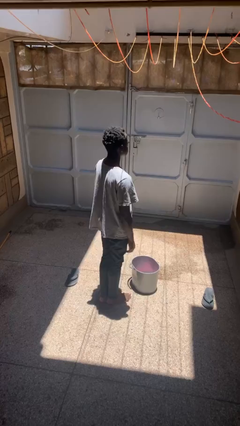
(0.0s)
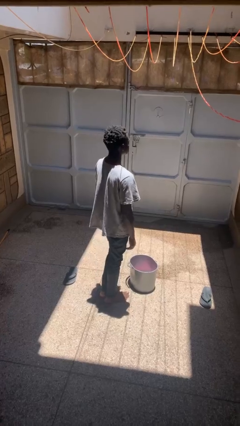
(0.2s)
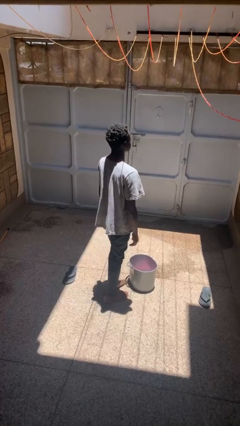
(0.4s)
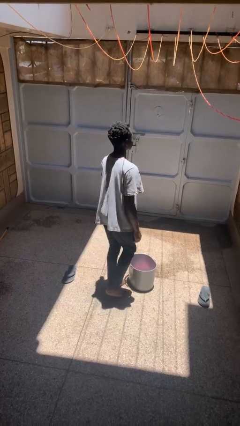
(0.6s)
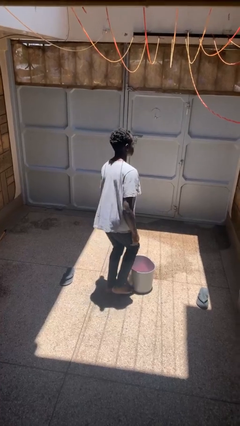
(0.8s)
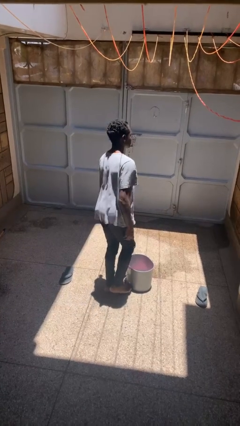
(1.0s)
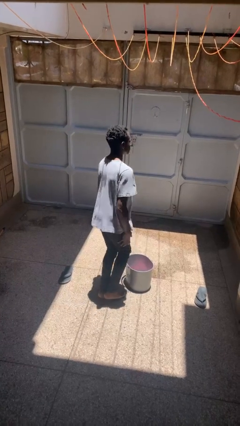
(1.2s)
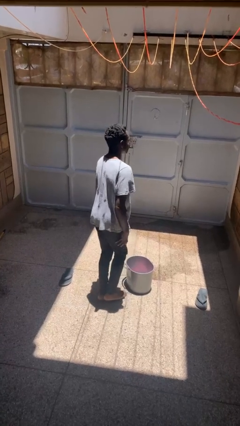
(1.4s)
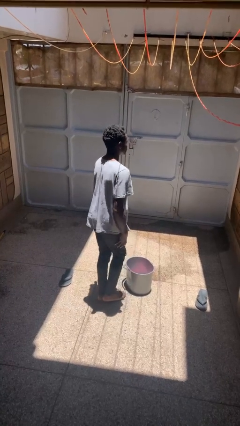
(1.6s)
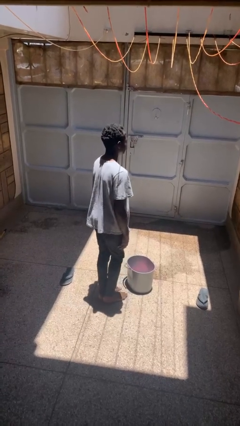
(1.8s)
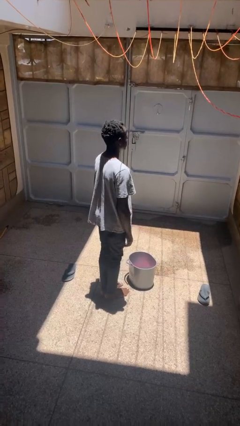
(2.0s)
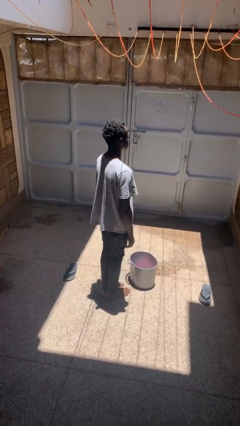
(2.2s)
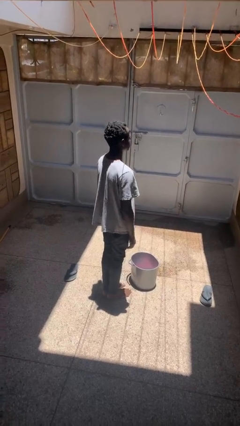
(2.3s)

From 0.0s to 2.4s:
person touches earlobe

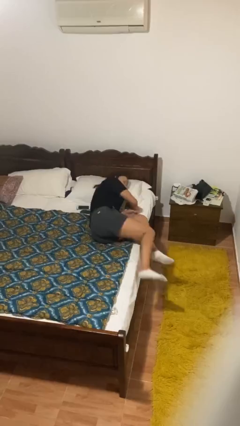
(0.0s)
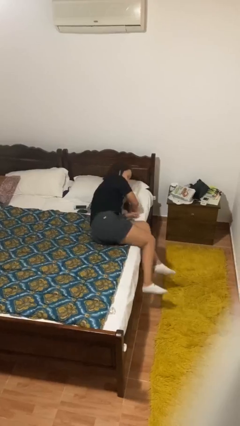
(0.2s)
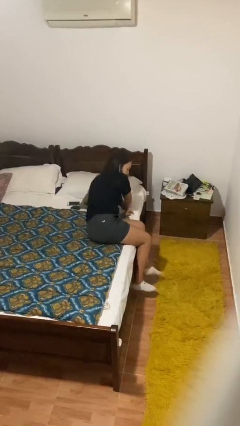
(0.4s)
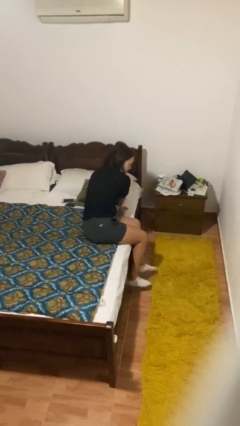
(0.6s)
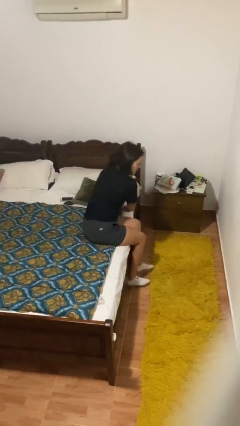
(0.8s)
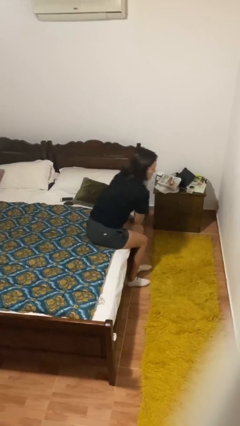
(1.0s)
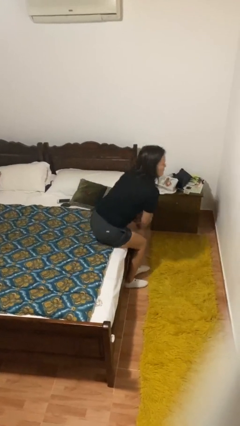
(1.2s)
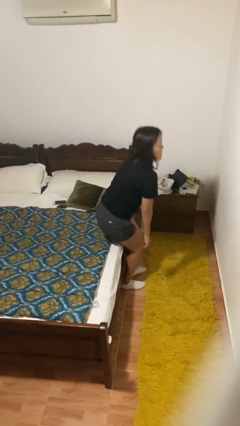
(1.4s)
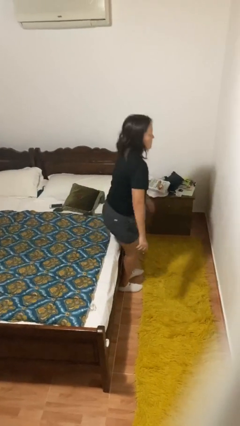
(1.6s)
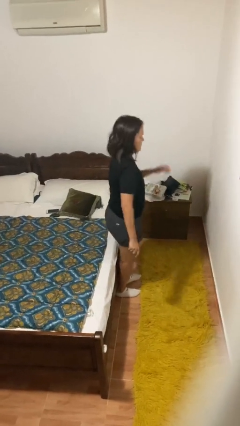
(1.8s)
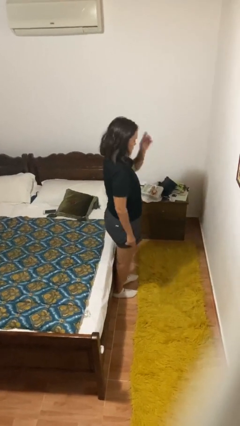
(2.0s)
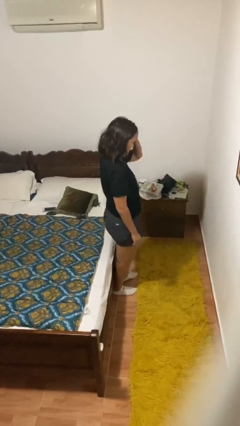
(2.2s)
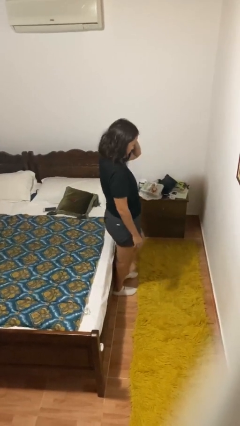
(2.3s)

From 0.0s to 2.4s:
person stands up

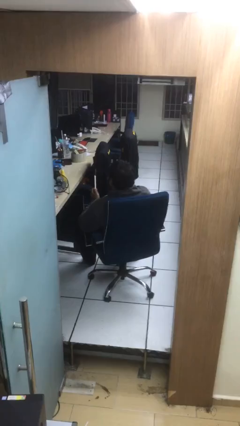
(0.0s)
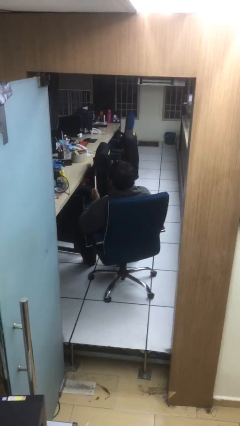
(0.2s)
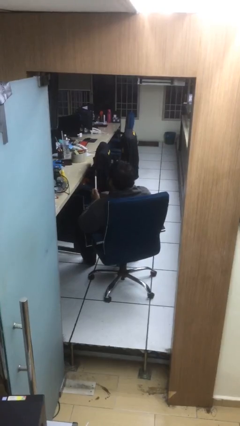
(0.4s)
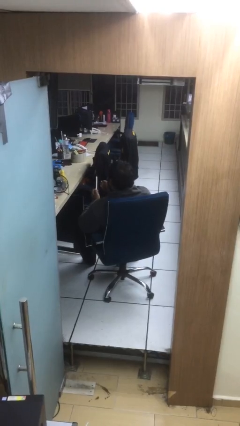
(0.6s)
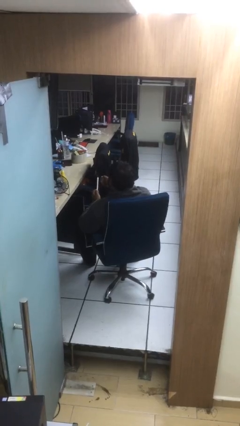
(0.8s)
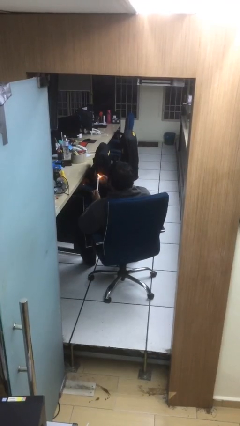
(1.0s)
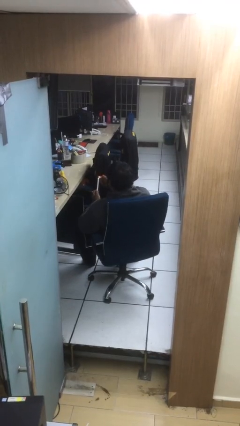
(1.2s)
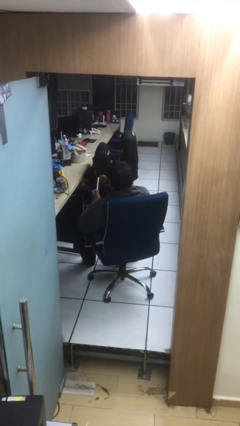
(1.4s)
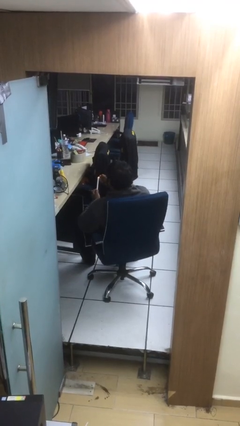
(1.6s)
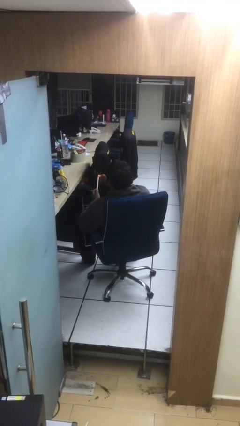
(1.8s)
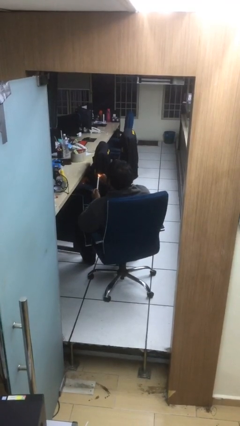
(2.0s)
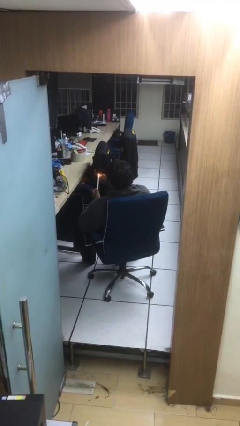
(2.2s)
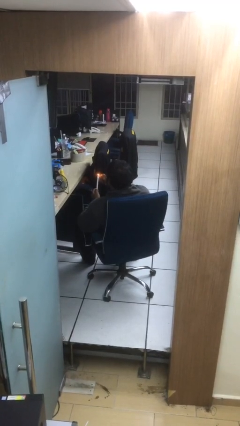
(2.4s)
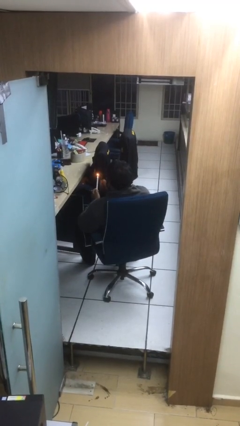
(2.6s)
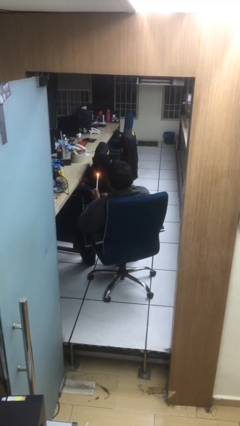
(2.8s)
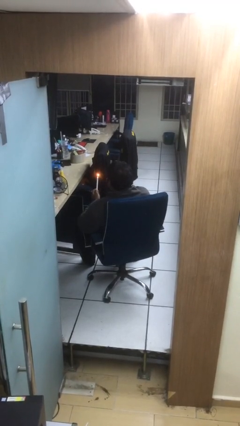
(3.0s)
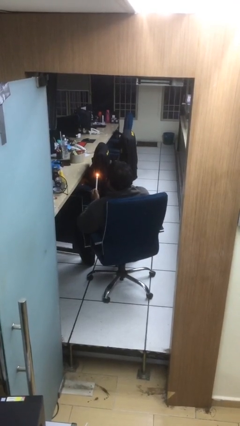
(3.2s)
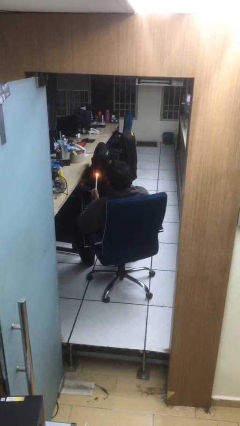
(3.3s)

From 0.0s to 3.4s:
person lights candle

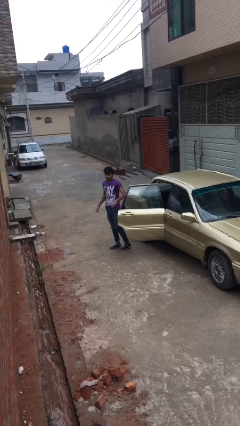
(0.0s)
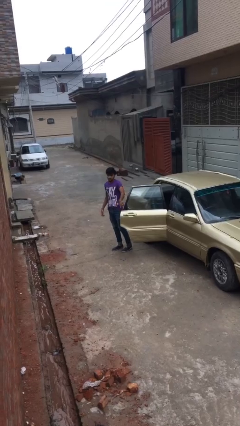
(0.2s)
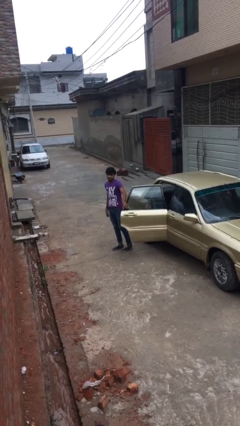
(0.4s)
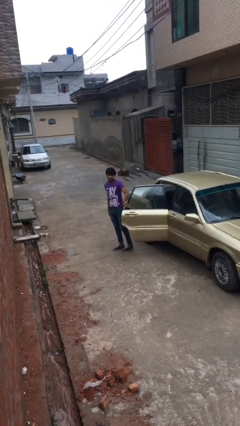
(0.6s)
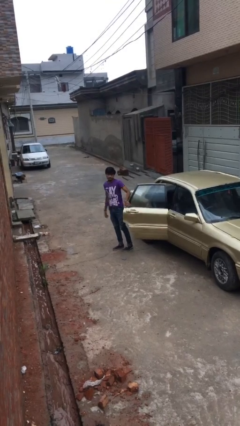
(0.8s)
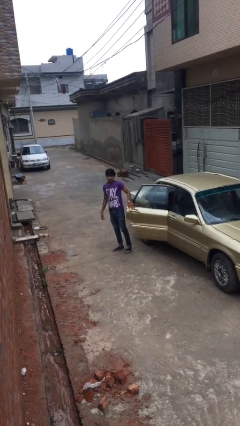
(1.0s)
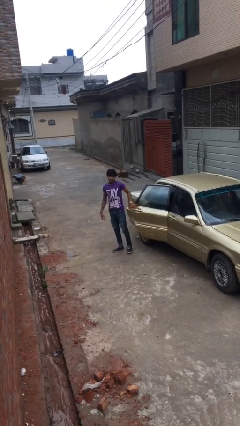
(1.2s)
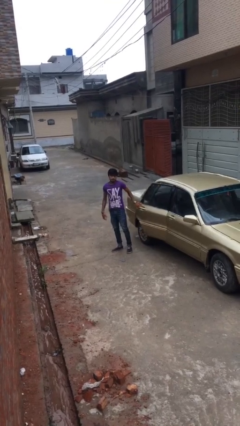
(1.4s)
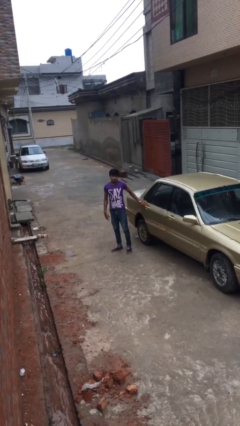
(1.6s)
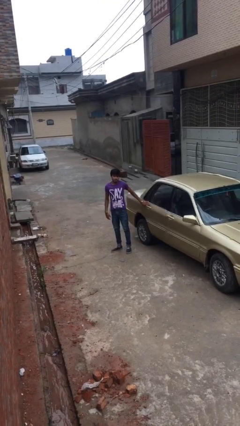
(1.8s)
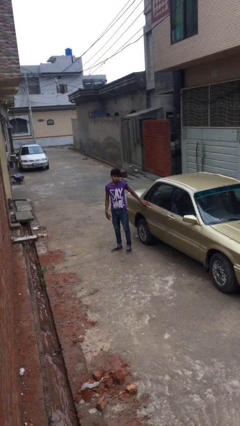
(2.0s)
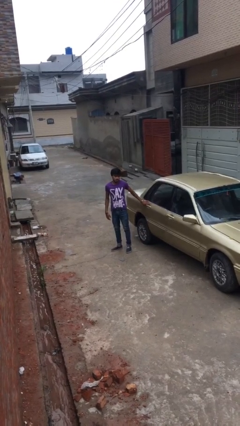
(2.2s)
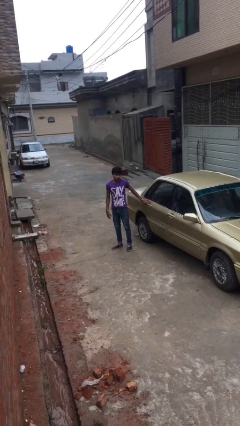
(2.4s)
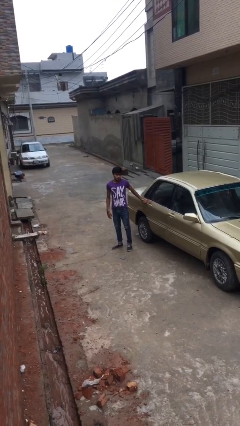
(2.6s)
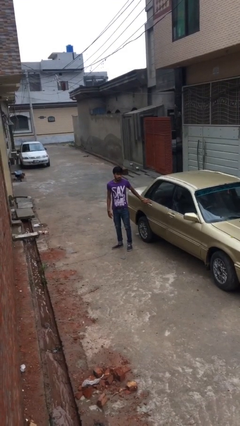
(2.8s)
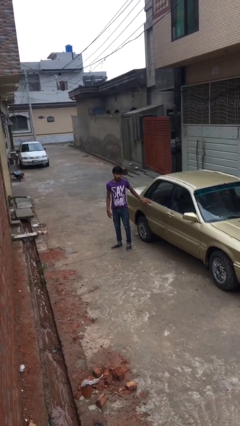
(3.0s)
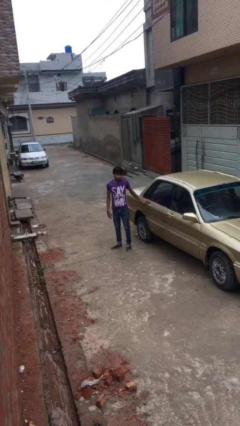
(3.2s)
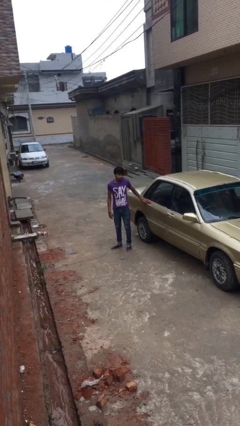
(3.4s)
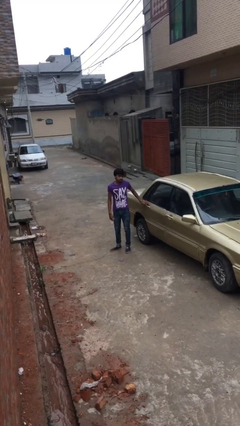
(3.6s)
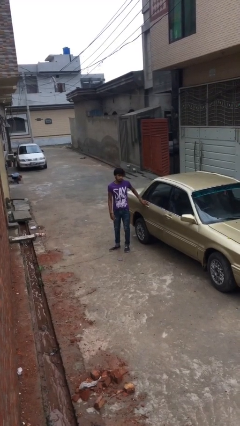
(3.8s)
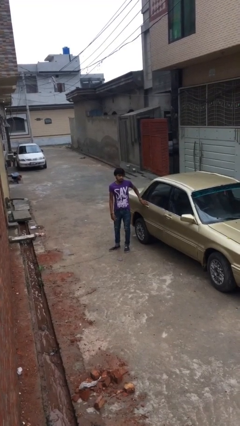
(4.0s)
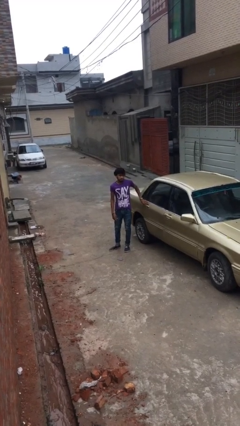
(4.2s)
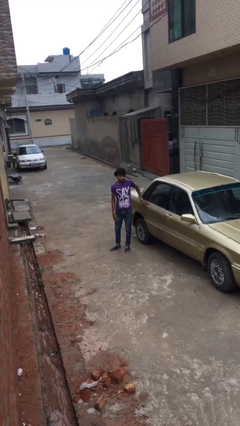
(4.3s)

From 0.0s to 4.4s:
person closes car door

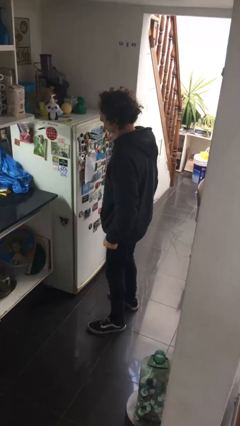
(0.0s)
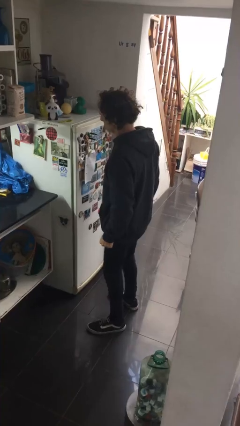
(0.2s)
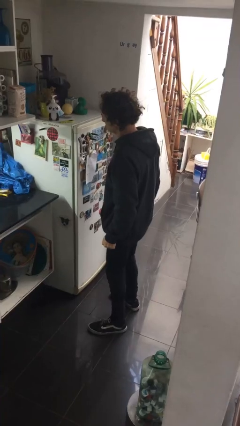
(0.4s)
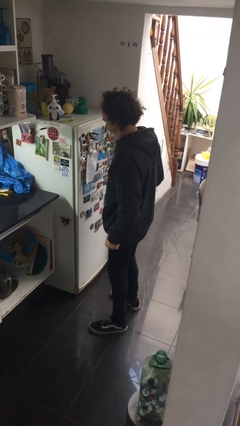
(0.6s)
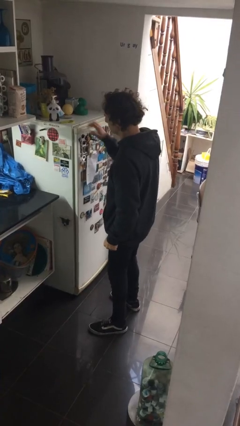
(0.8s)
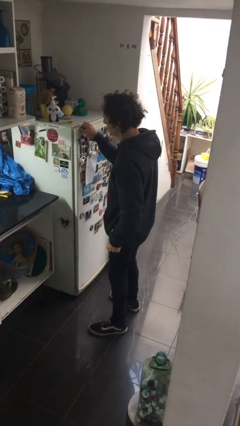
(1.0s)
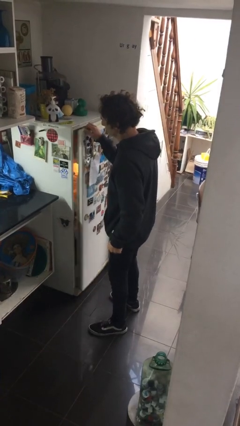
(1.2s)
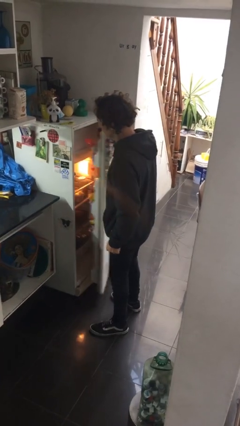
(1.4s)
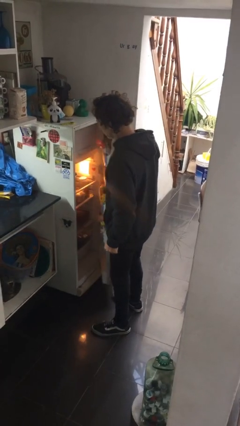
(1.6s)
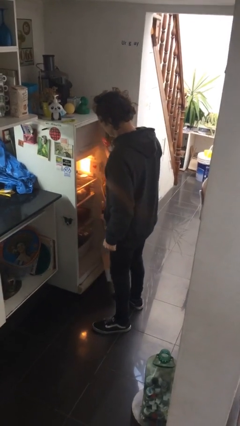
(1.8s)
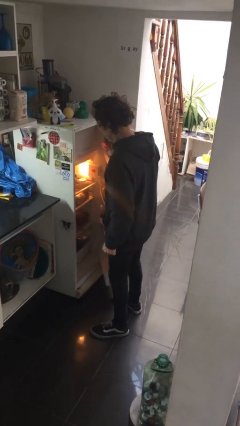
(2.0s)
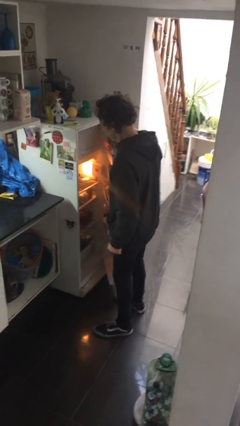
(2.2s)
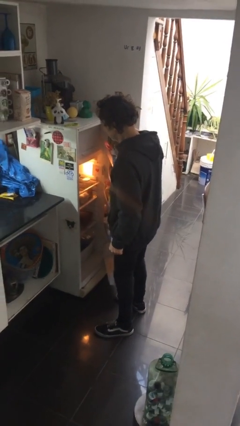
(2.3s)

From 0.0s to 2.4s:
person opens refrigerator

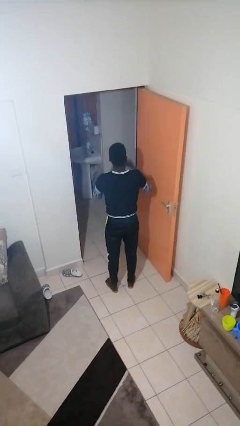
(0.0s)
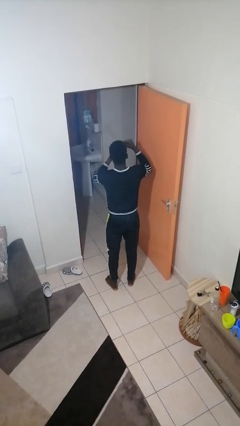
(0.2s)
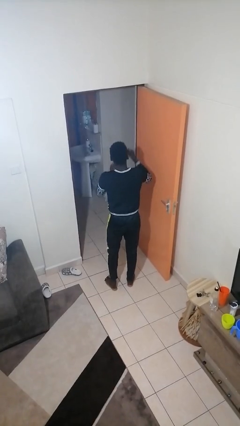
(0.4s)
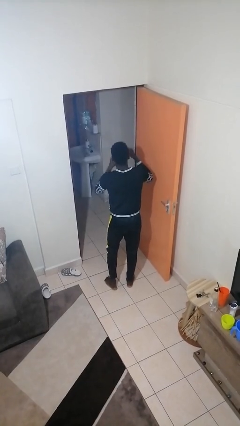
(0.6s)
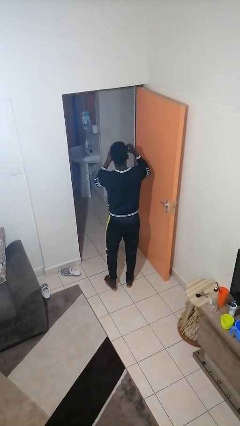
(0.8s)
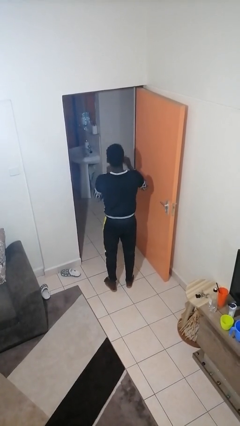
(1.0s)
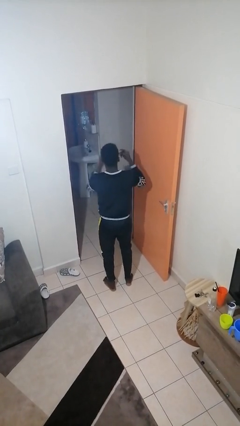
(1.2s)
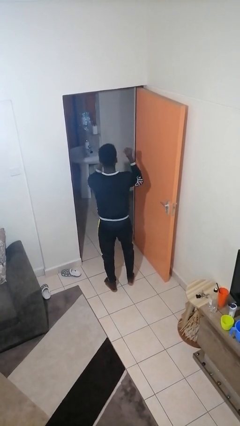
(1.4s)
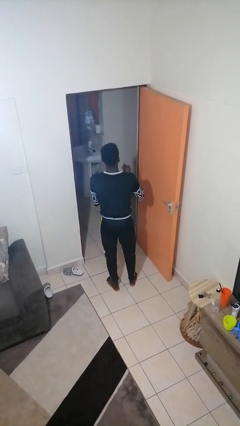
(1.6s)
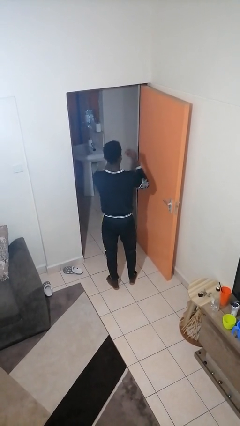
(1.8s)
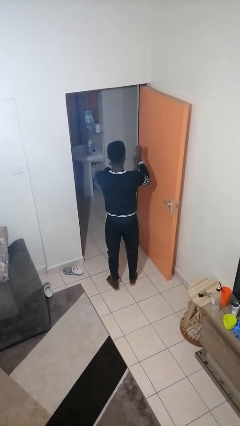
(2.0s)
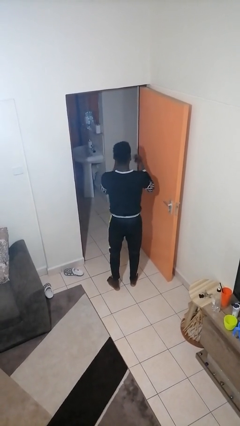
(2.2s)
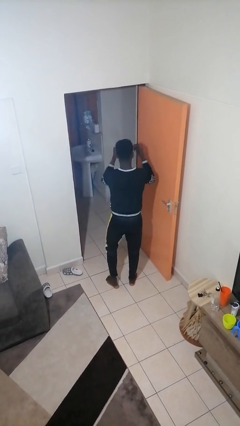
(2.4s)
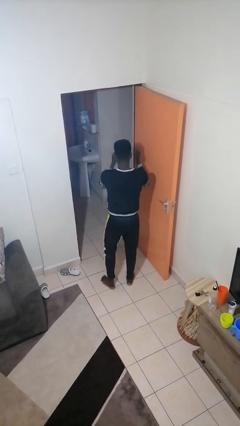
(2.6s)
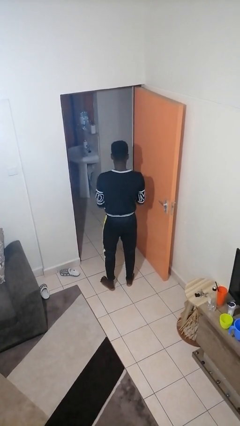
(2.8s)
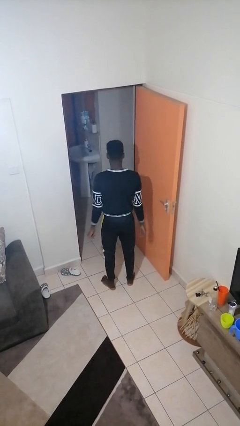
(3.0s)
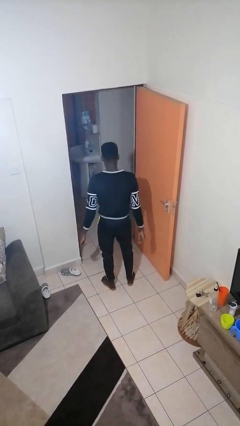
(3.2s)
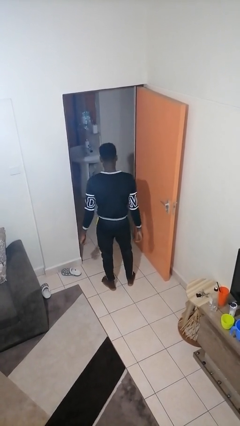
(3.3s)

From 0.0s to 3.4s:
person snaps fingers
